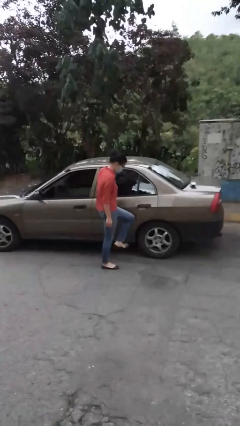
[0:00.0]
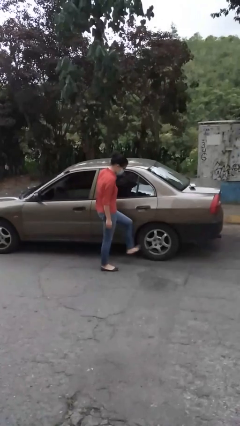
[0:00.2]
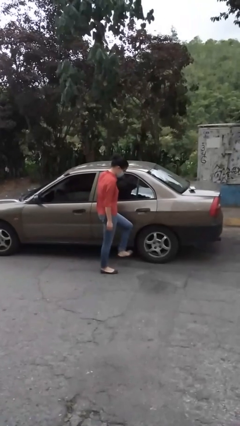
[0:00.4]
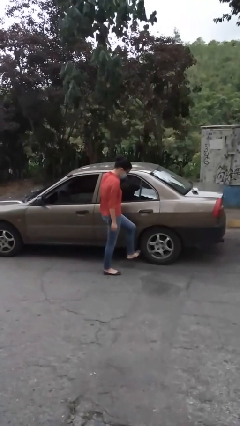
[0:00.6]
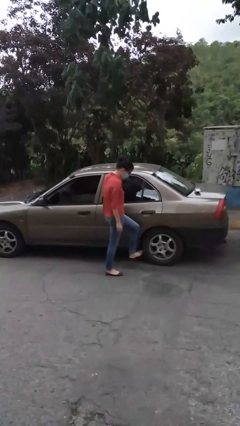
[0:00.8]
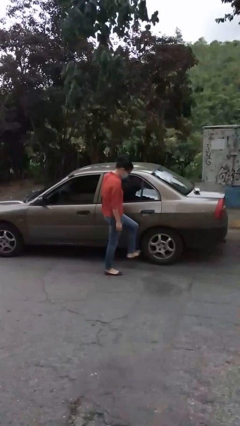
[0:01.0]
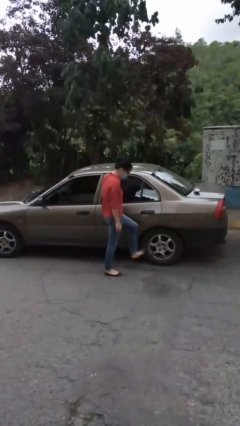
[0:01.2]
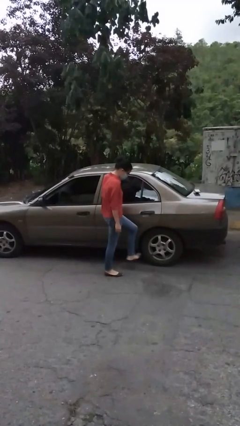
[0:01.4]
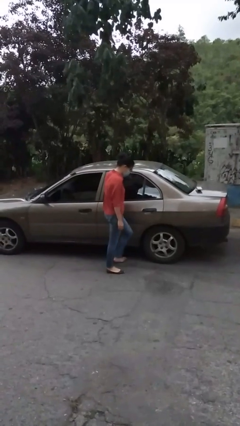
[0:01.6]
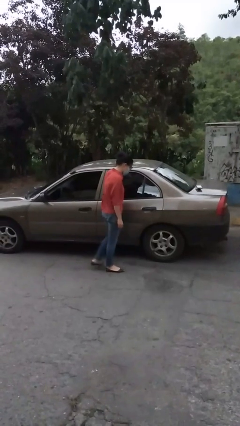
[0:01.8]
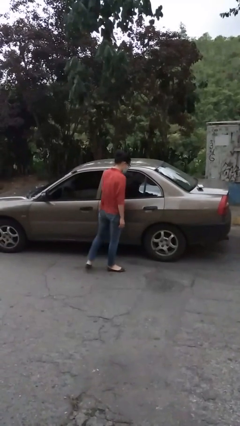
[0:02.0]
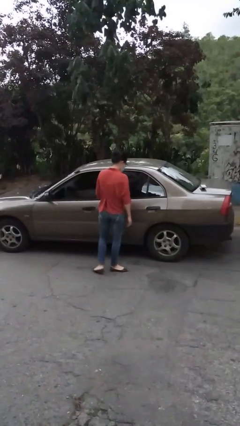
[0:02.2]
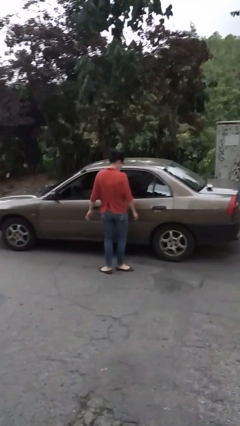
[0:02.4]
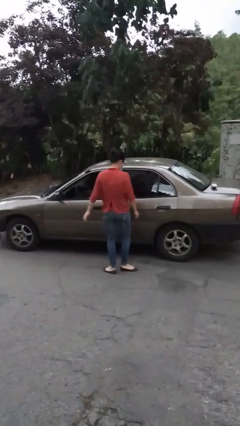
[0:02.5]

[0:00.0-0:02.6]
person kicks car tires

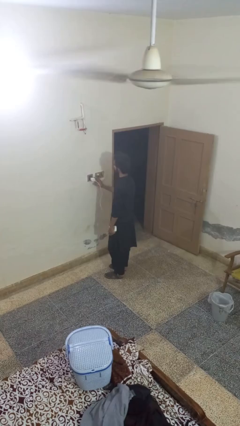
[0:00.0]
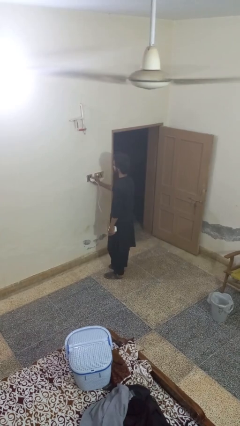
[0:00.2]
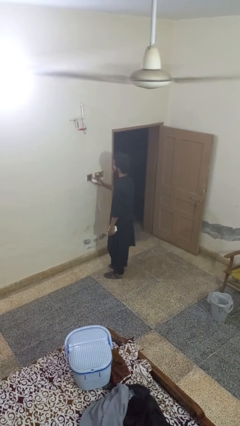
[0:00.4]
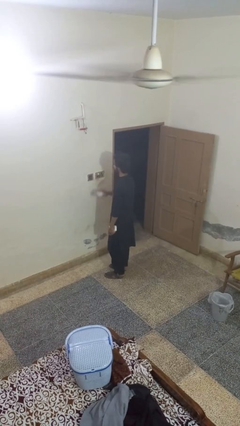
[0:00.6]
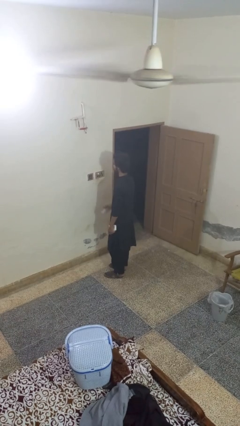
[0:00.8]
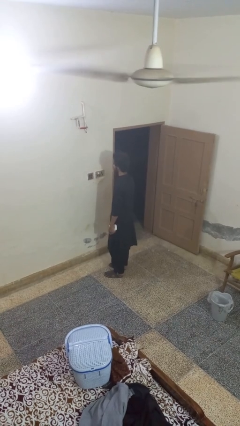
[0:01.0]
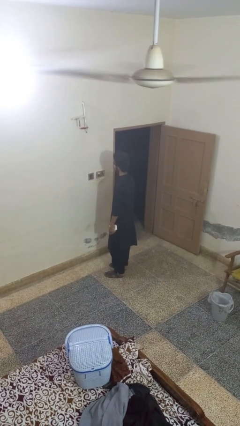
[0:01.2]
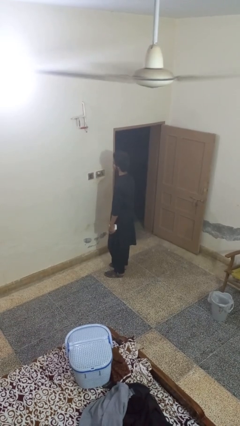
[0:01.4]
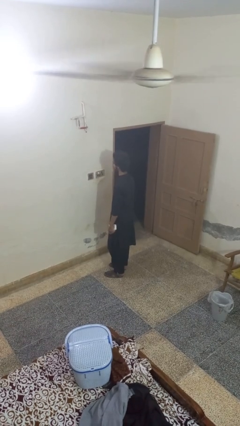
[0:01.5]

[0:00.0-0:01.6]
person unplugs from electrical socket

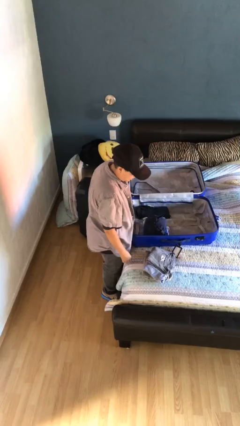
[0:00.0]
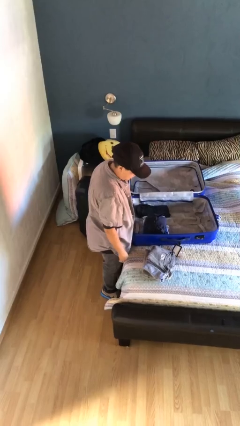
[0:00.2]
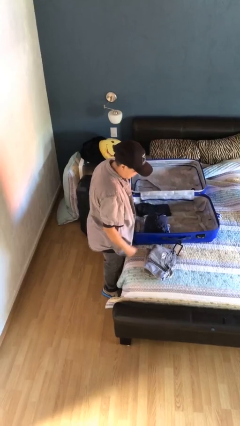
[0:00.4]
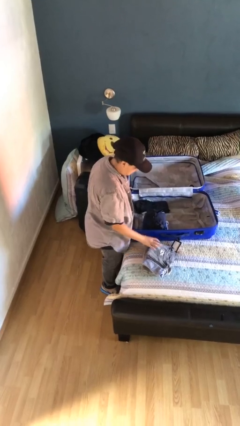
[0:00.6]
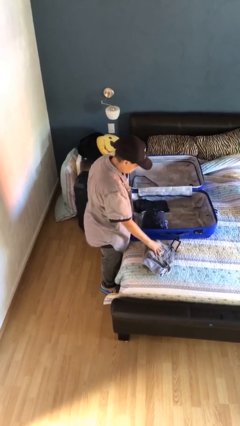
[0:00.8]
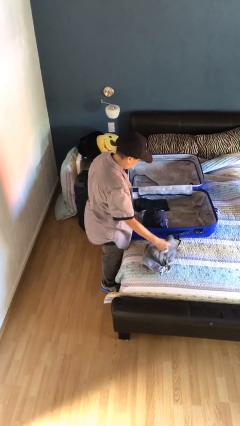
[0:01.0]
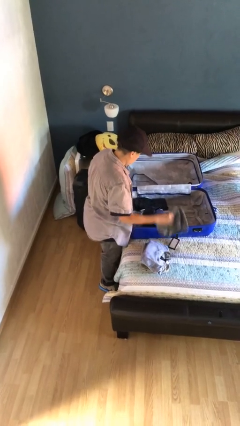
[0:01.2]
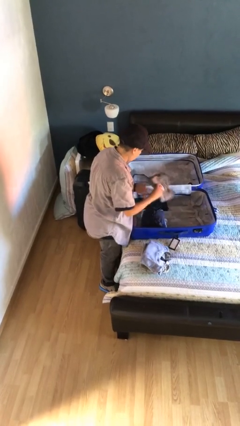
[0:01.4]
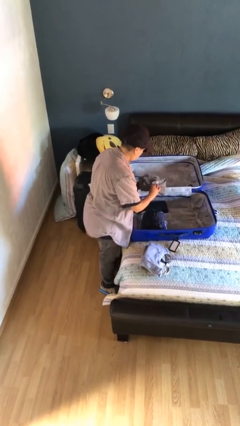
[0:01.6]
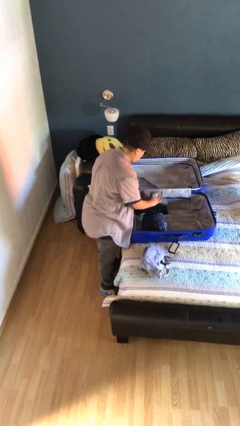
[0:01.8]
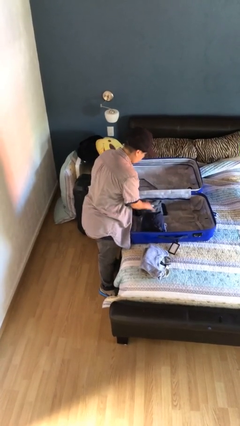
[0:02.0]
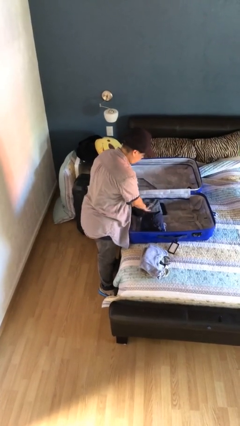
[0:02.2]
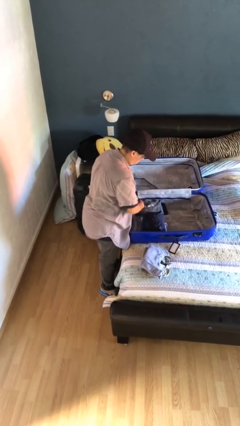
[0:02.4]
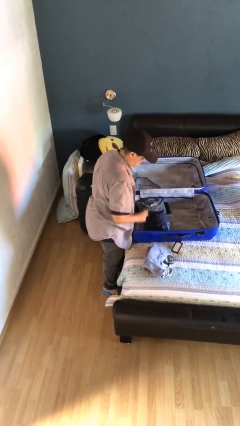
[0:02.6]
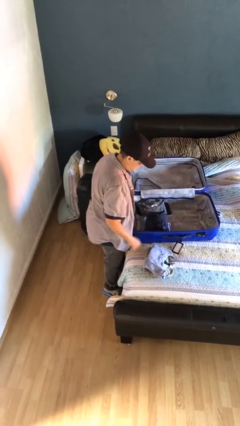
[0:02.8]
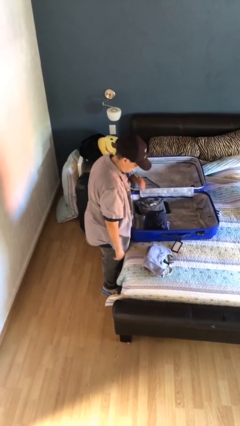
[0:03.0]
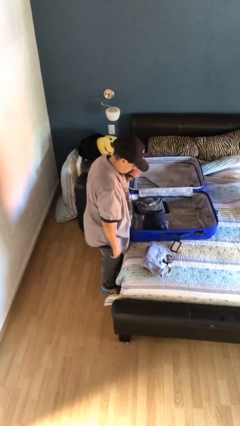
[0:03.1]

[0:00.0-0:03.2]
person loads clothes into suitcase

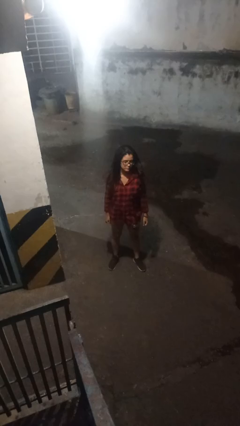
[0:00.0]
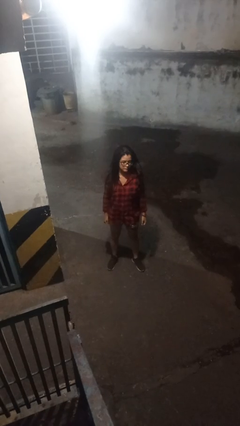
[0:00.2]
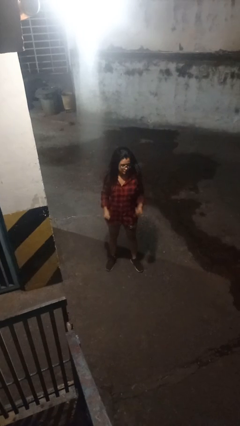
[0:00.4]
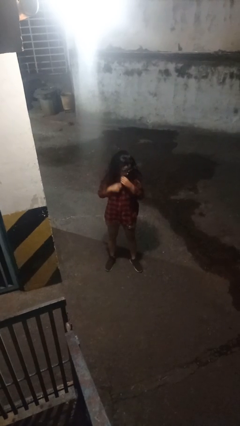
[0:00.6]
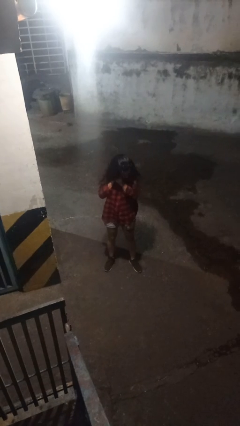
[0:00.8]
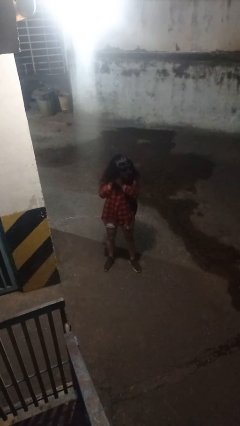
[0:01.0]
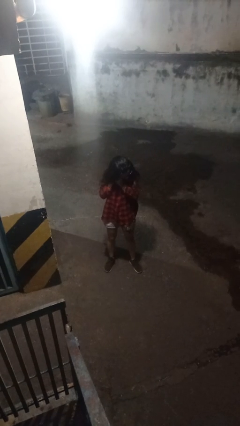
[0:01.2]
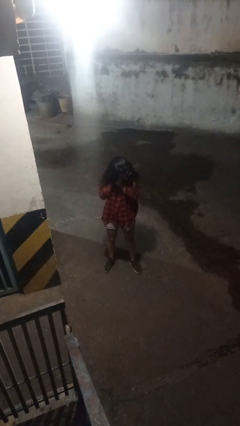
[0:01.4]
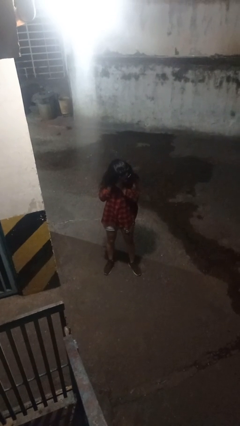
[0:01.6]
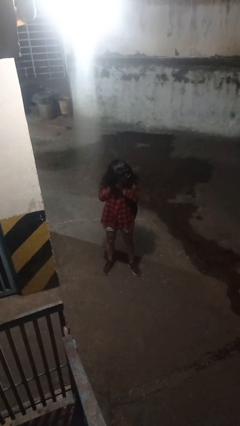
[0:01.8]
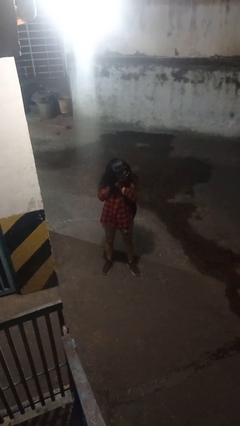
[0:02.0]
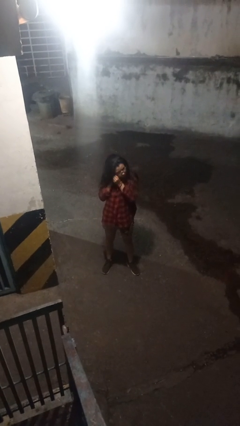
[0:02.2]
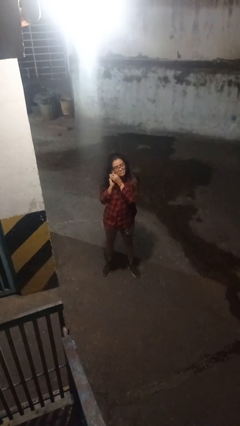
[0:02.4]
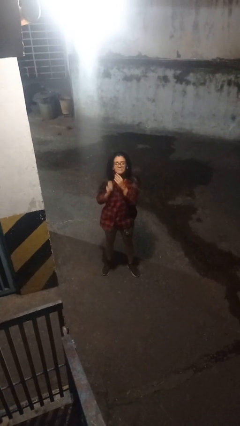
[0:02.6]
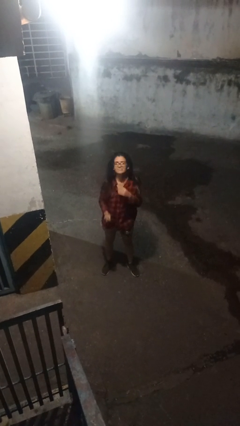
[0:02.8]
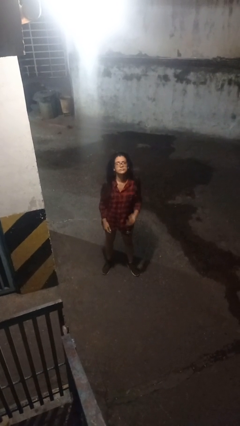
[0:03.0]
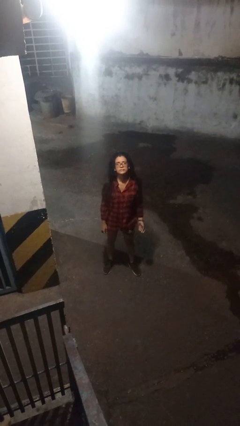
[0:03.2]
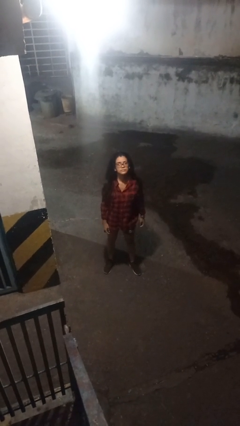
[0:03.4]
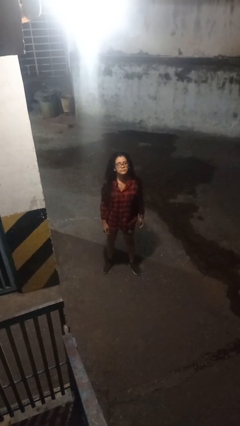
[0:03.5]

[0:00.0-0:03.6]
person puts on earrings

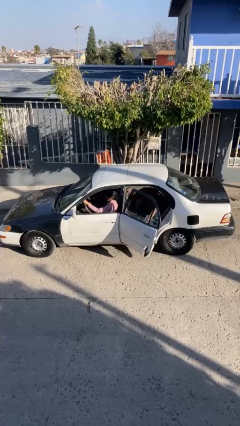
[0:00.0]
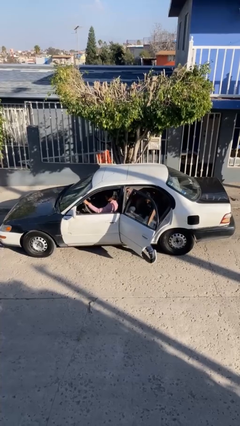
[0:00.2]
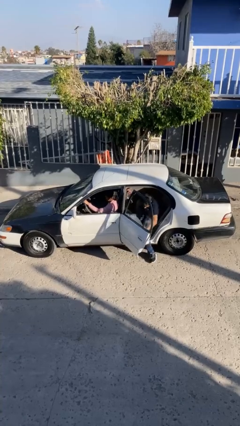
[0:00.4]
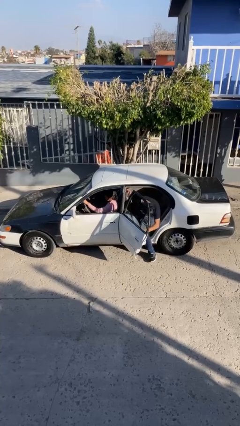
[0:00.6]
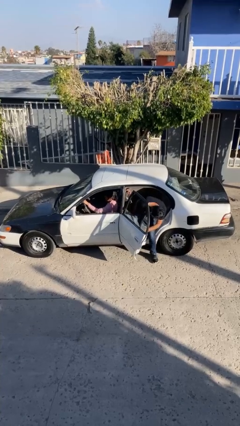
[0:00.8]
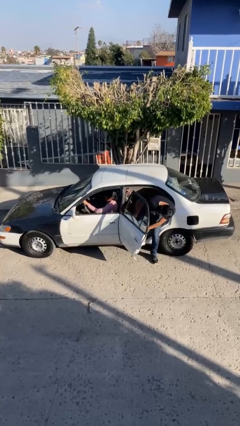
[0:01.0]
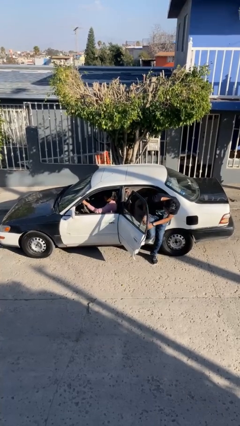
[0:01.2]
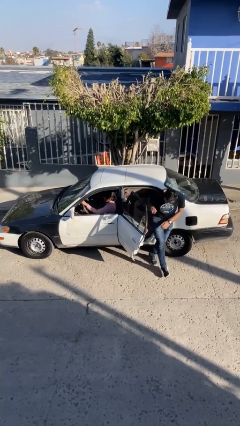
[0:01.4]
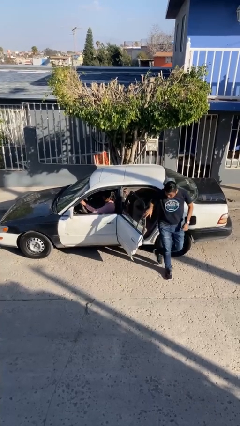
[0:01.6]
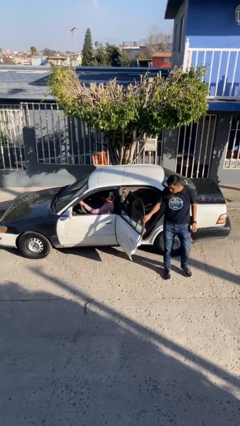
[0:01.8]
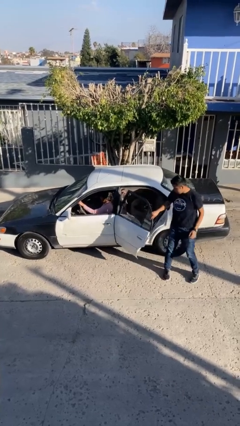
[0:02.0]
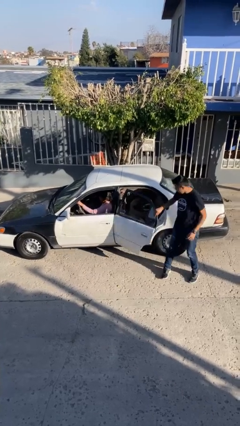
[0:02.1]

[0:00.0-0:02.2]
car drops off person

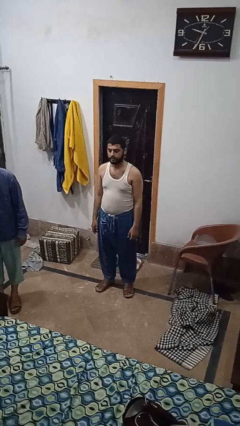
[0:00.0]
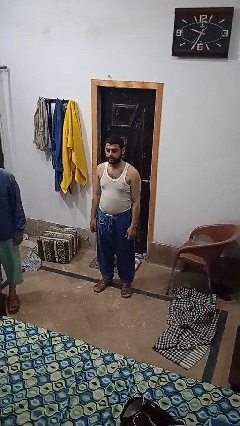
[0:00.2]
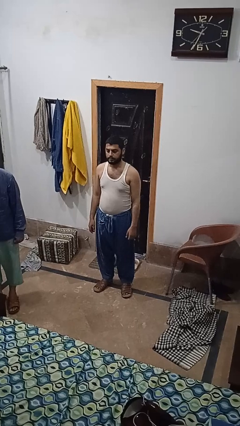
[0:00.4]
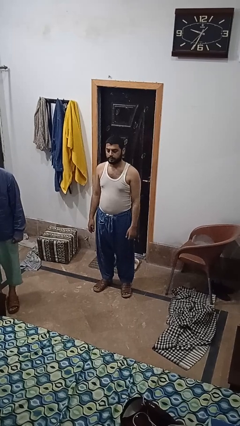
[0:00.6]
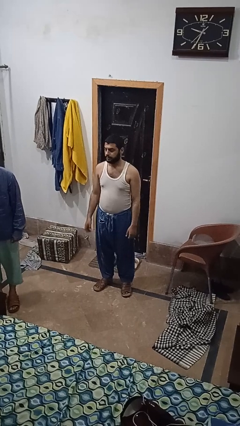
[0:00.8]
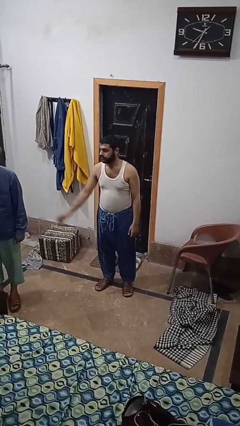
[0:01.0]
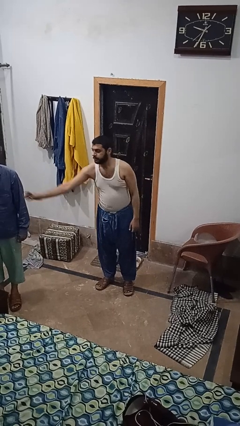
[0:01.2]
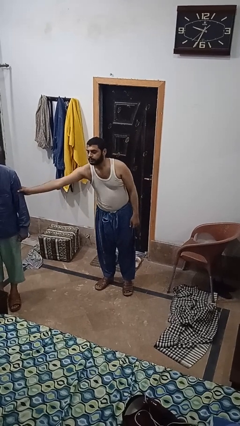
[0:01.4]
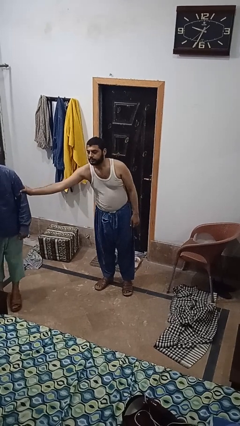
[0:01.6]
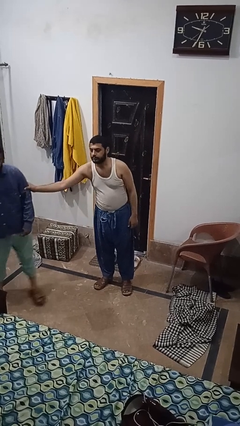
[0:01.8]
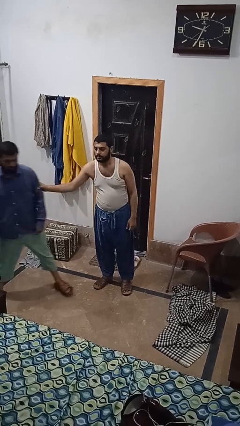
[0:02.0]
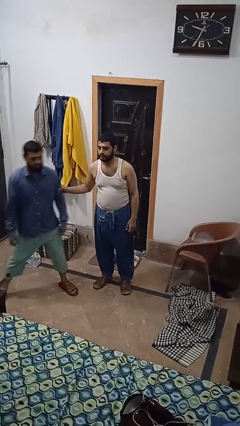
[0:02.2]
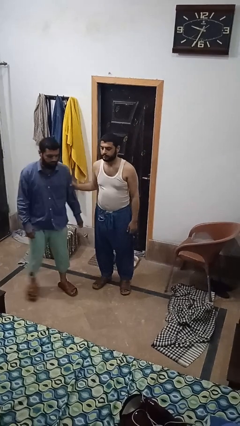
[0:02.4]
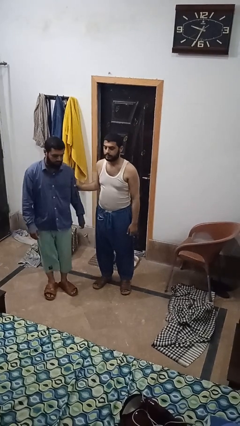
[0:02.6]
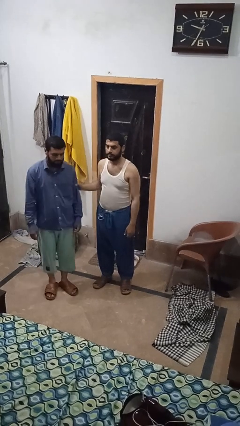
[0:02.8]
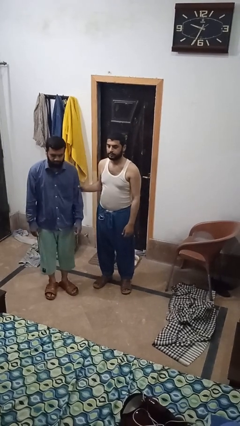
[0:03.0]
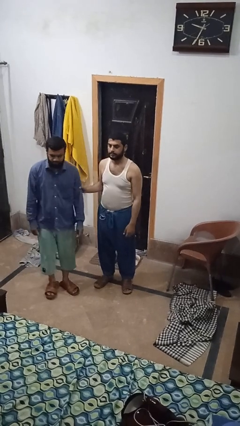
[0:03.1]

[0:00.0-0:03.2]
person grabs person by bicep

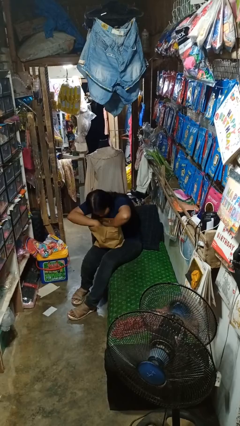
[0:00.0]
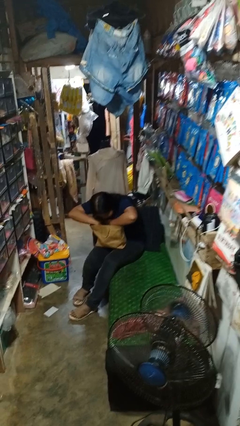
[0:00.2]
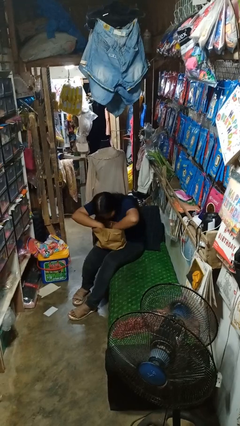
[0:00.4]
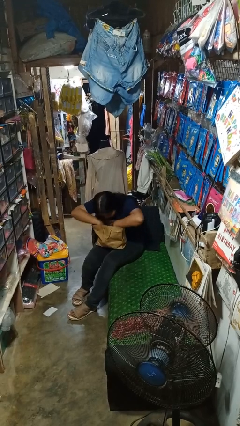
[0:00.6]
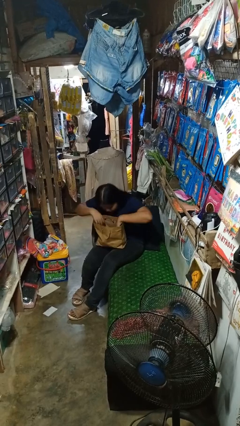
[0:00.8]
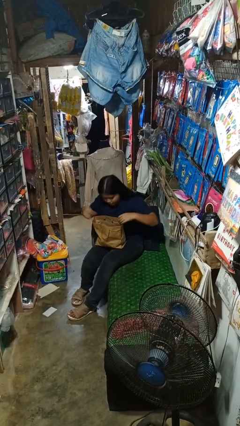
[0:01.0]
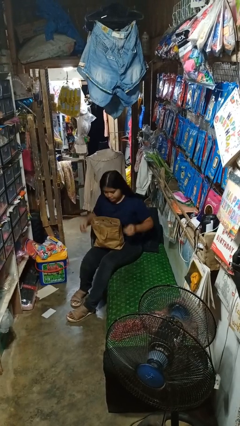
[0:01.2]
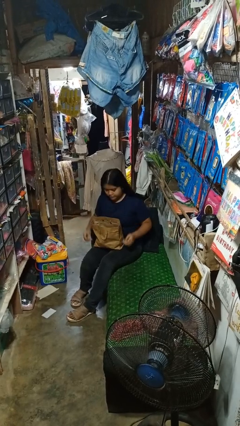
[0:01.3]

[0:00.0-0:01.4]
person searches in bag
